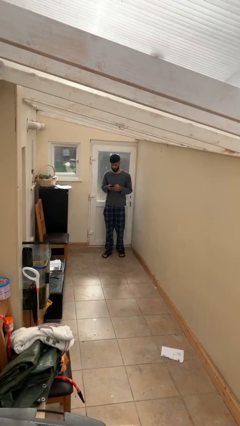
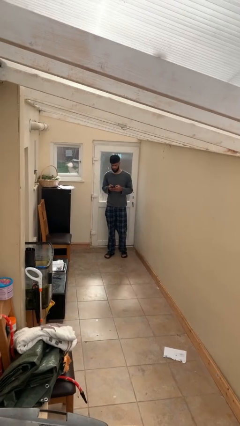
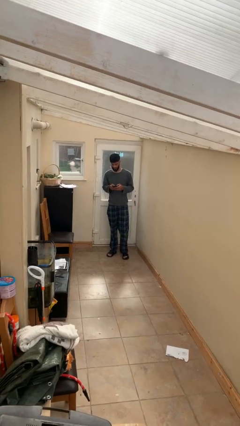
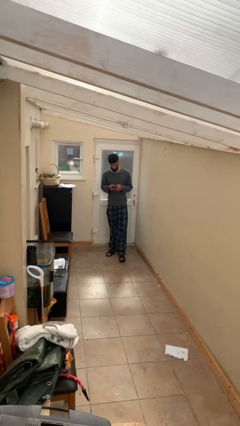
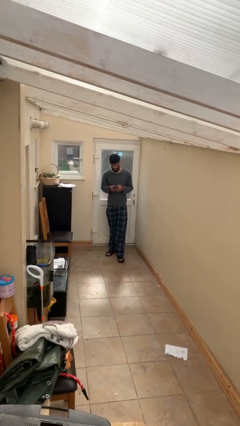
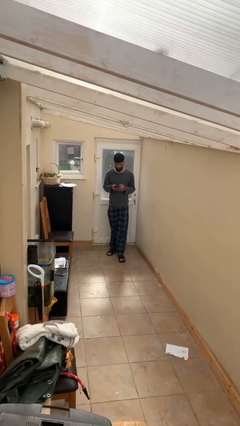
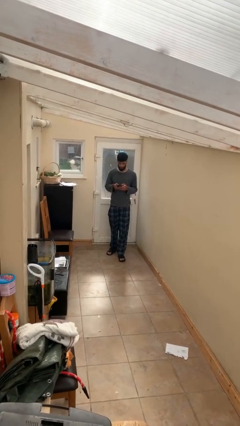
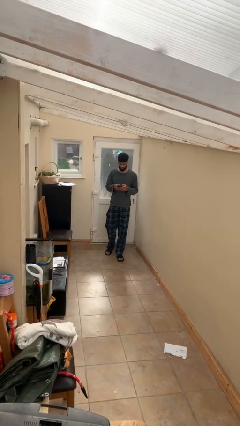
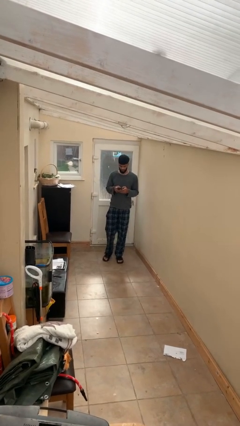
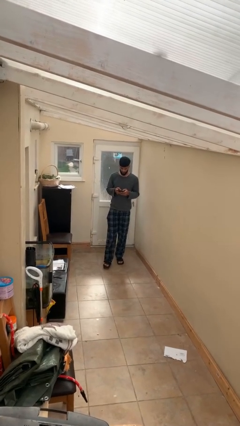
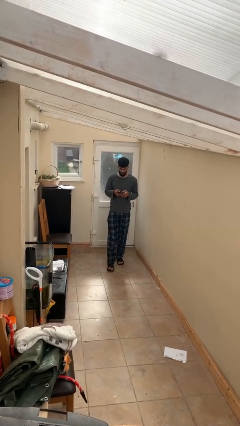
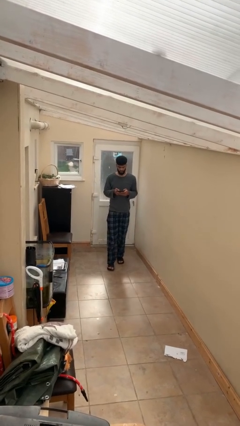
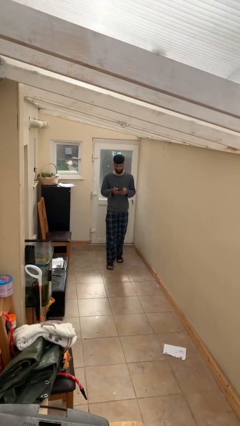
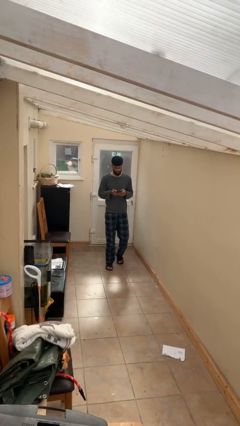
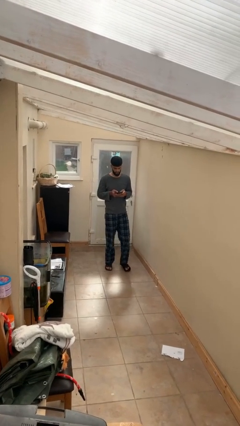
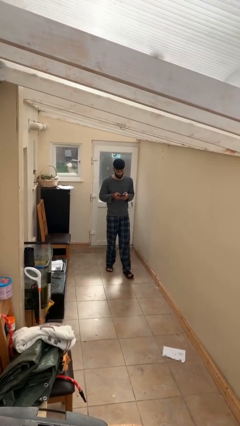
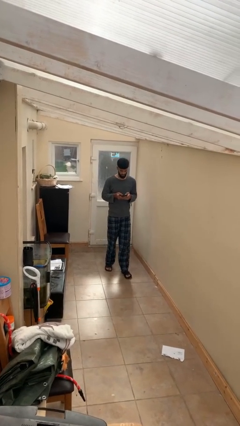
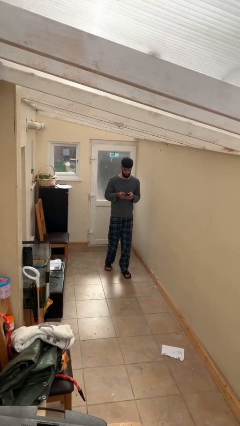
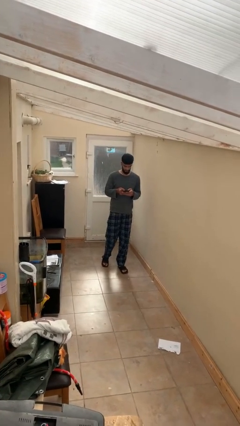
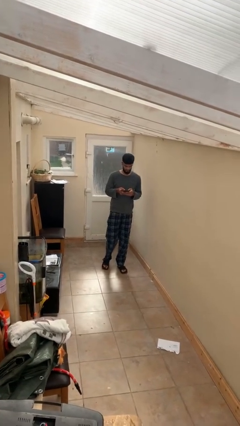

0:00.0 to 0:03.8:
person texts on phone

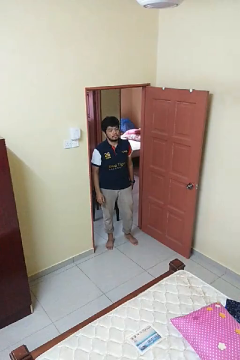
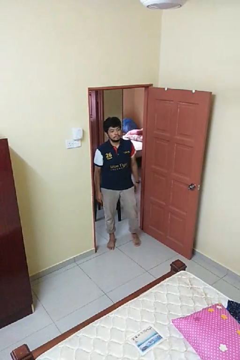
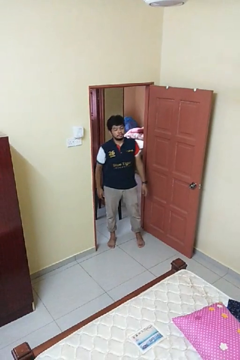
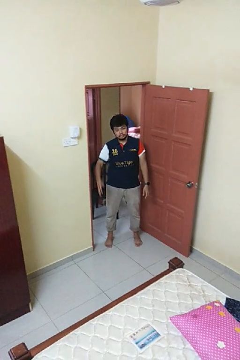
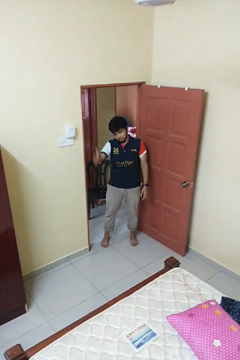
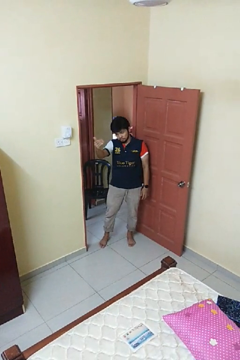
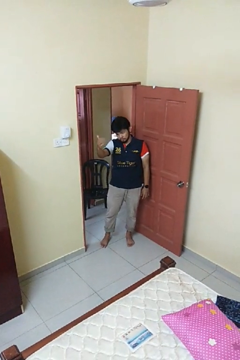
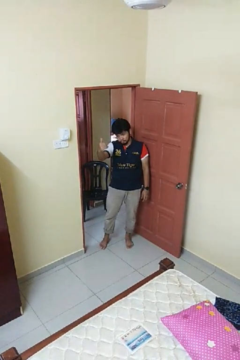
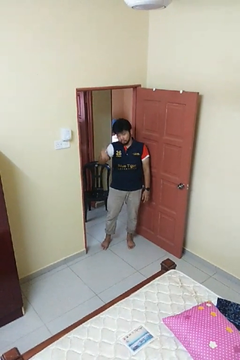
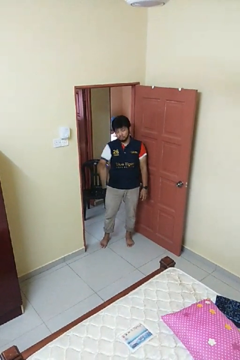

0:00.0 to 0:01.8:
person gestures come here

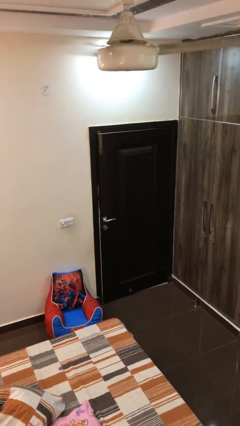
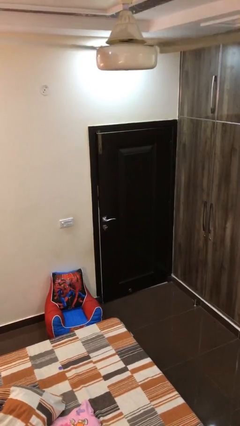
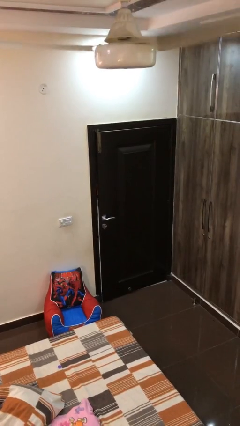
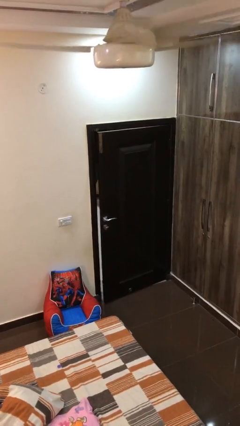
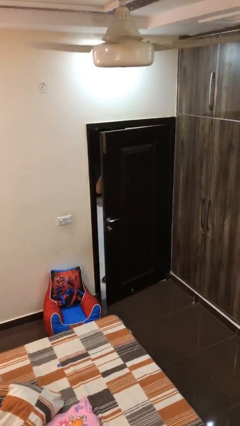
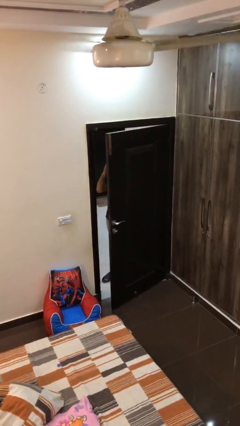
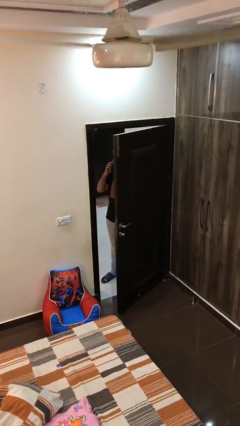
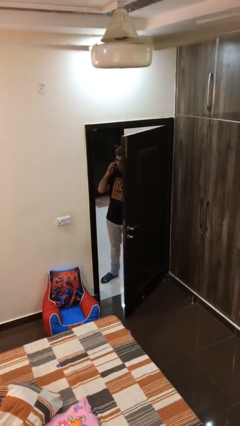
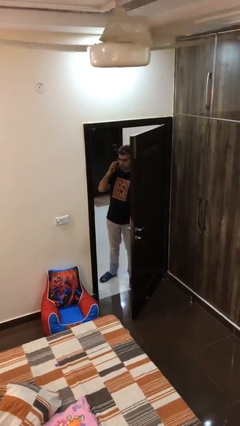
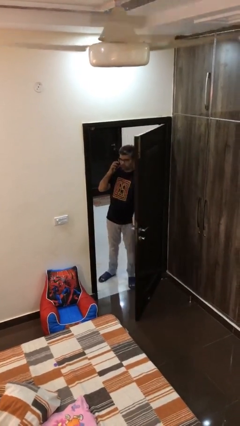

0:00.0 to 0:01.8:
person opens facility door

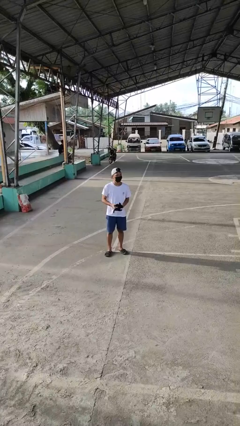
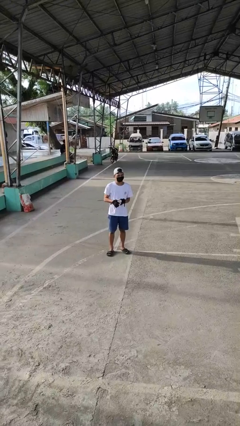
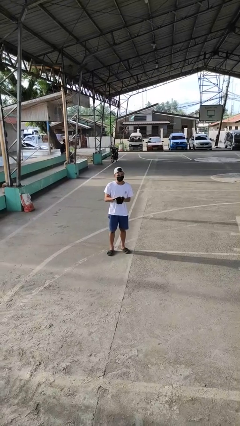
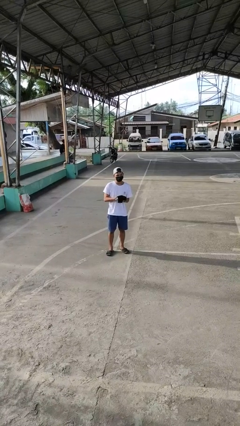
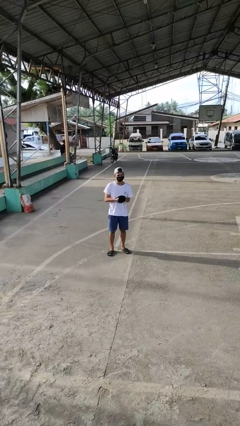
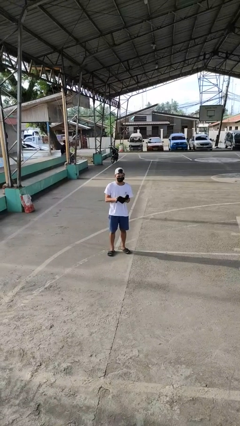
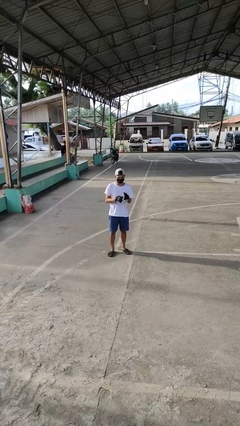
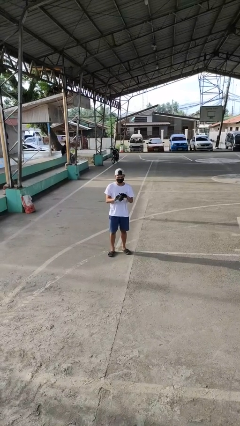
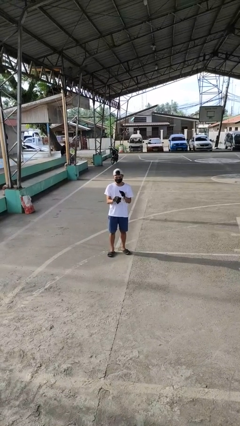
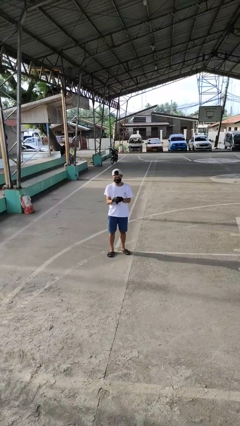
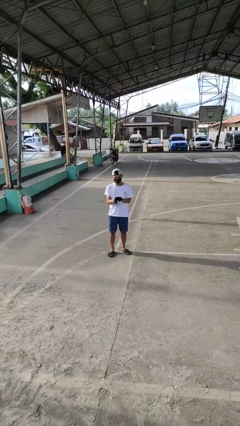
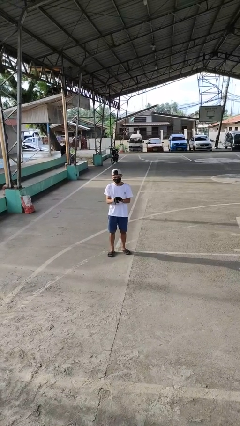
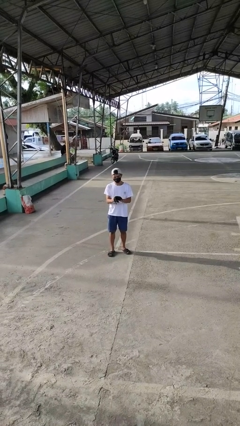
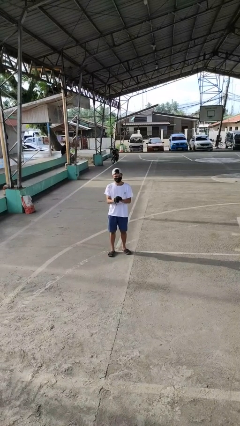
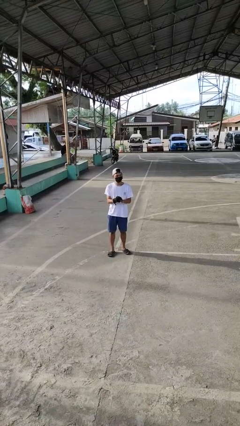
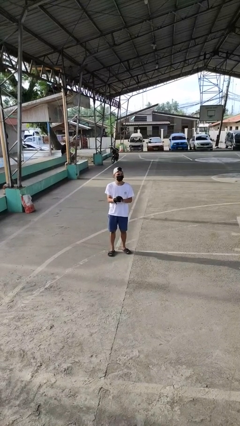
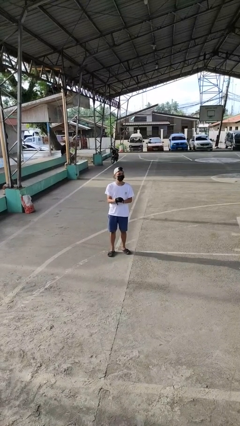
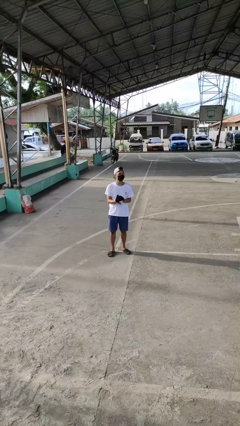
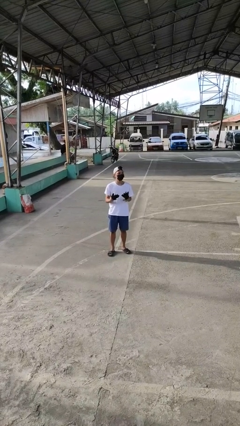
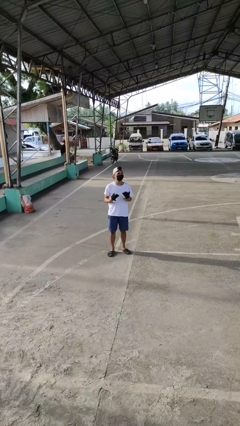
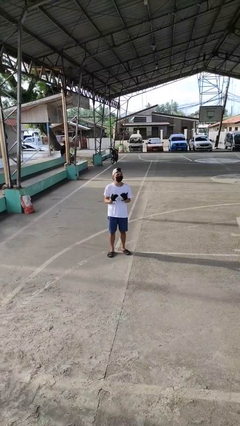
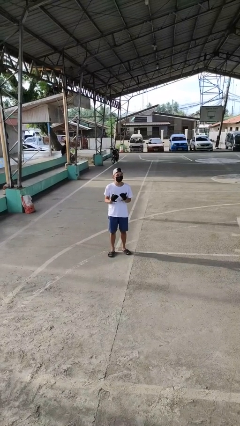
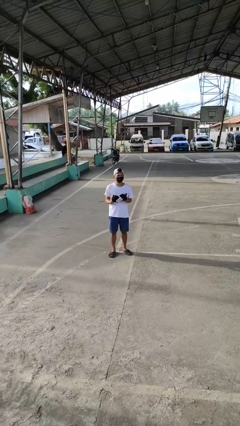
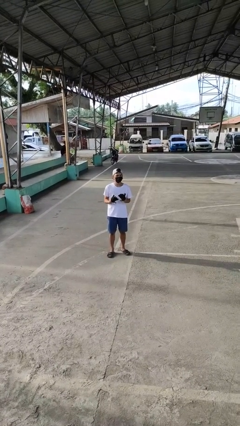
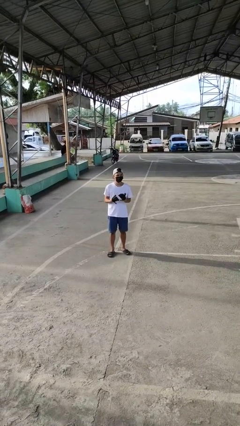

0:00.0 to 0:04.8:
person puts on gloves

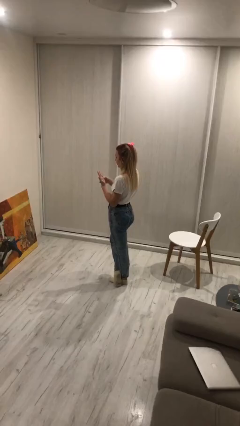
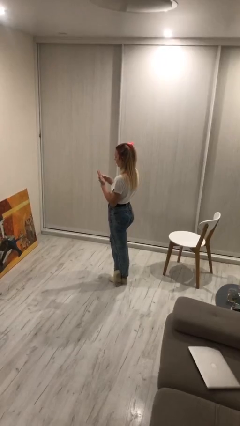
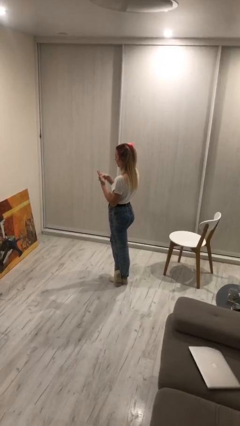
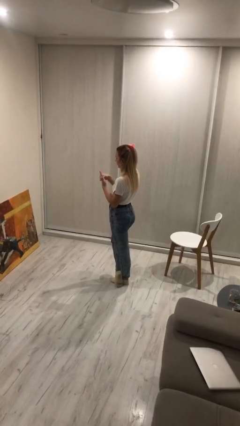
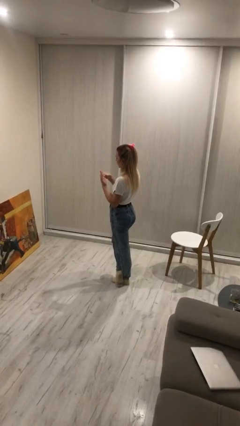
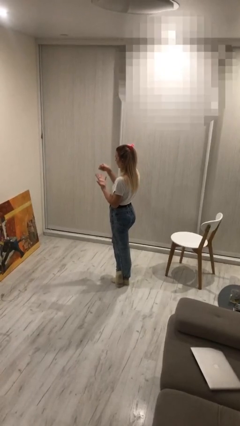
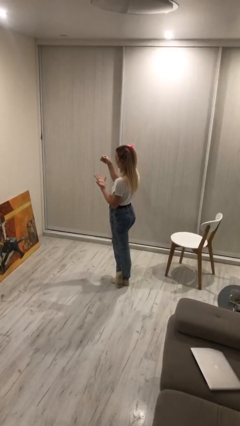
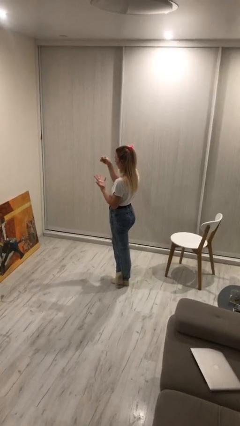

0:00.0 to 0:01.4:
person takes off ring

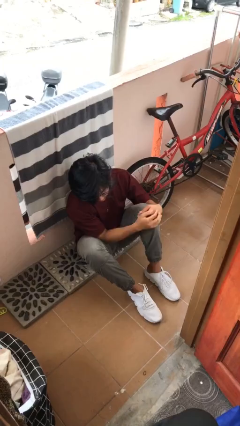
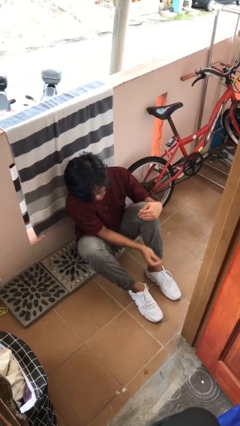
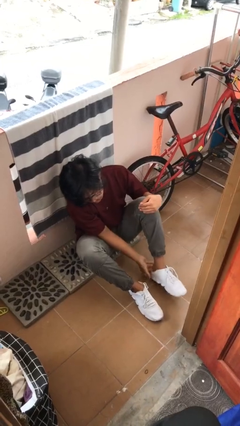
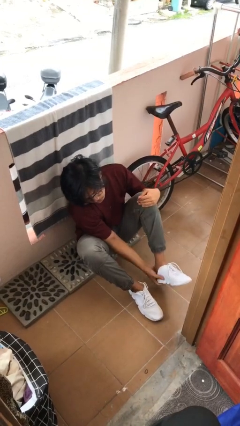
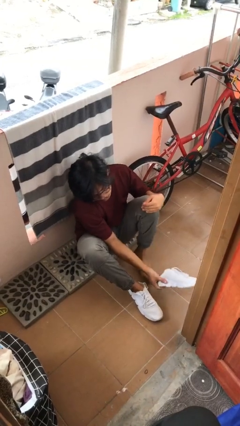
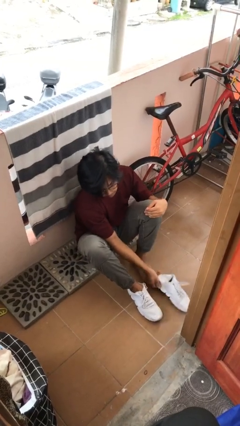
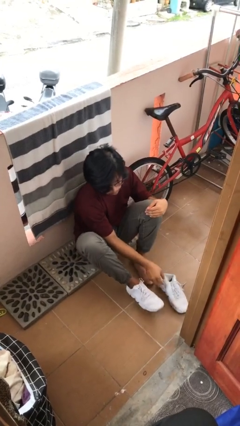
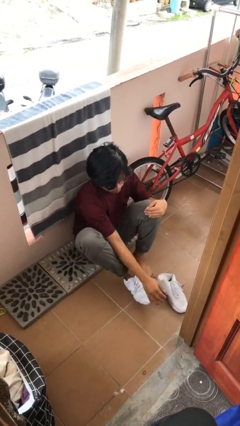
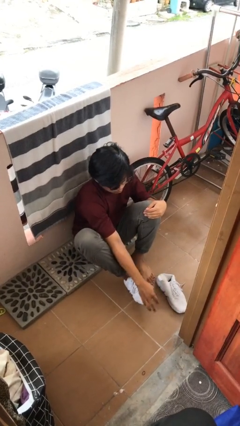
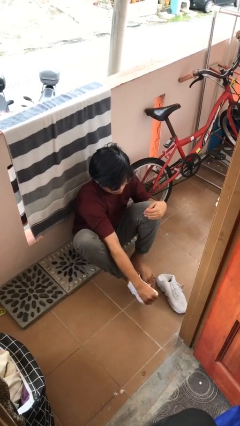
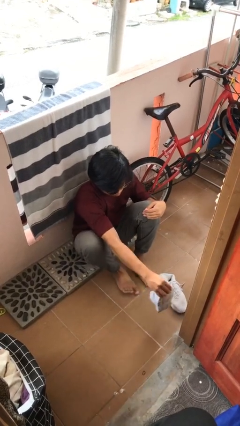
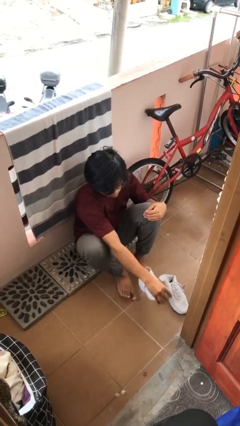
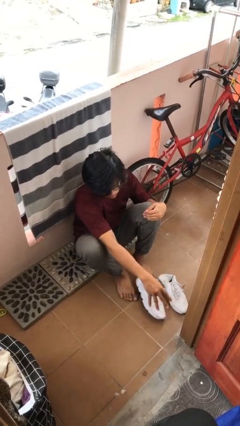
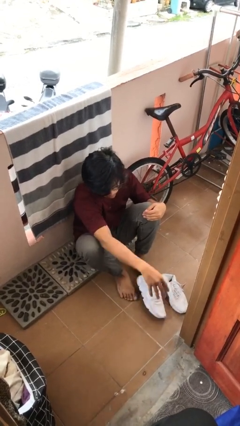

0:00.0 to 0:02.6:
person takes off shoes

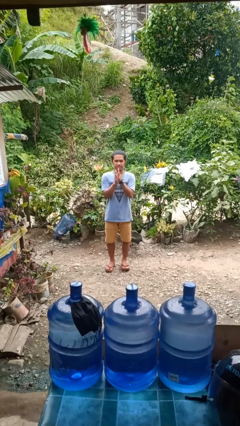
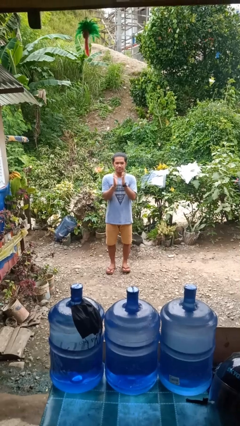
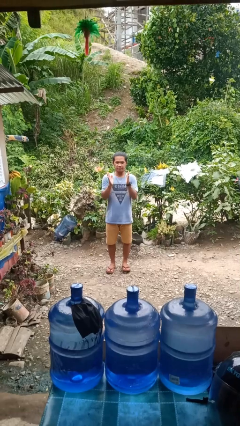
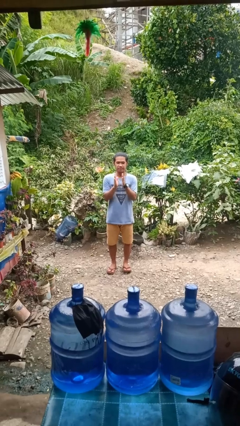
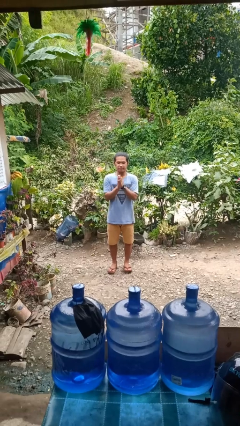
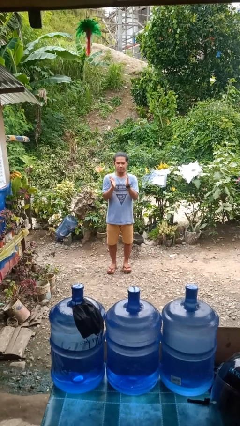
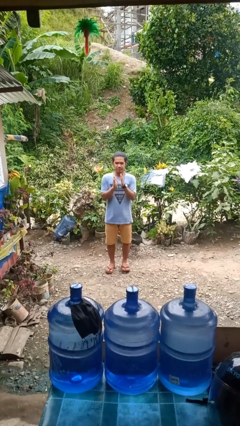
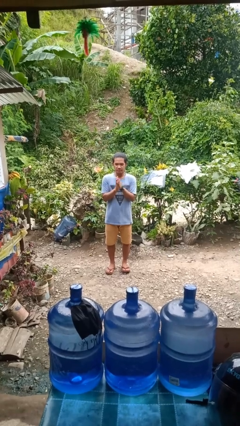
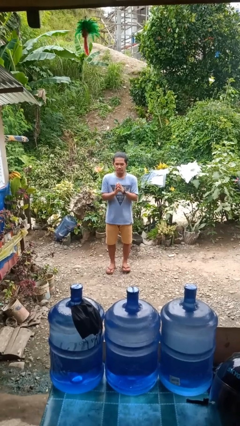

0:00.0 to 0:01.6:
person claps hands
